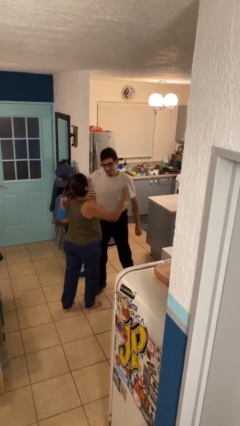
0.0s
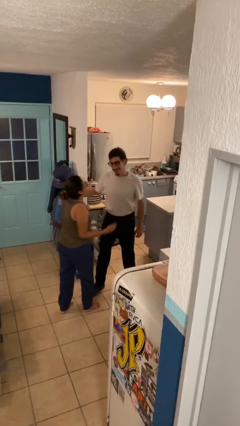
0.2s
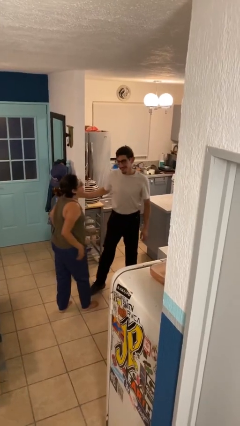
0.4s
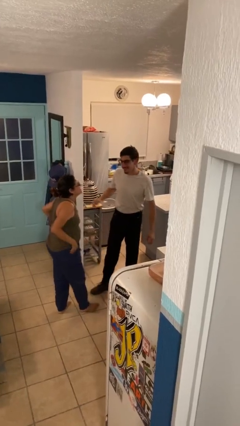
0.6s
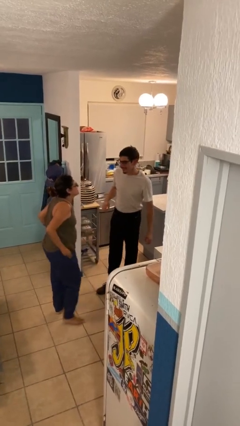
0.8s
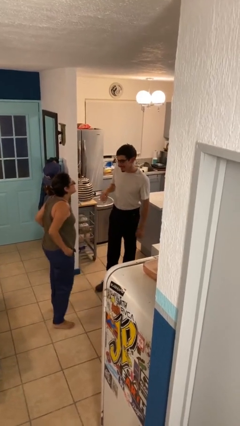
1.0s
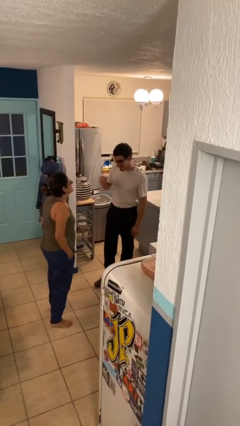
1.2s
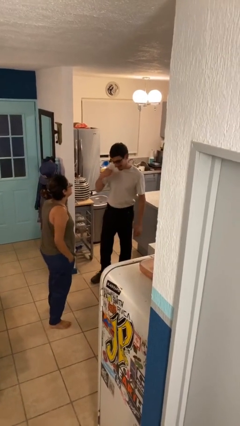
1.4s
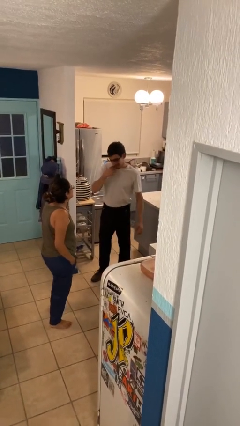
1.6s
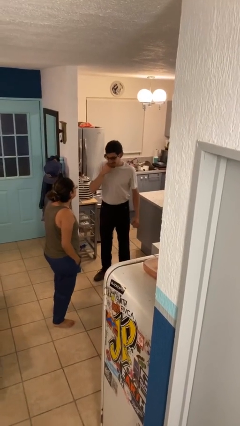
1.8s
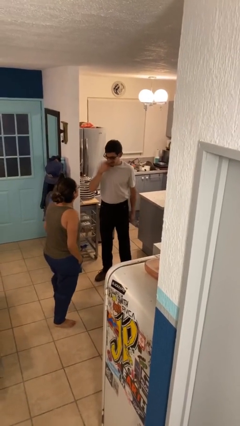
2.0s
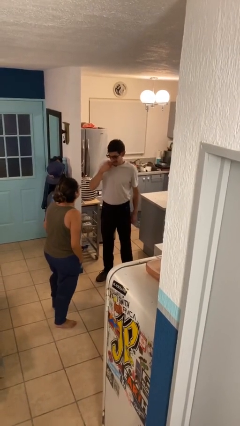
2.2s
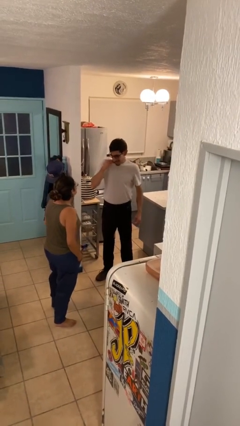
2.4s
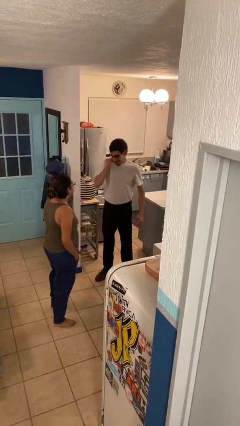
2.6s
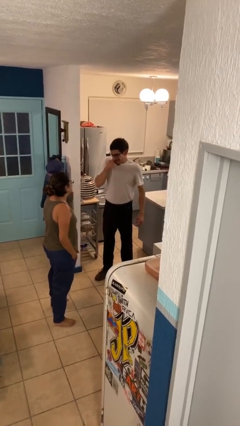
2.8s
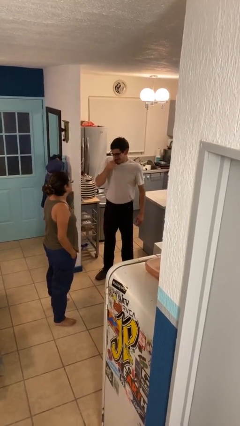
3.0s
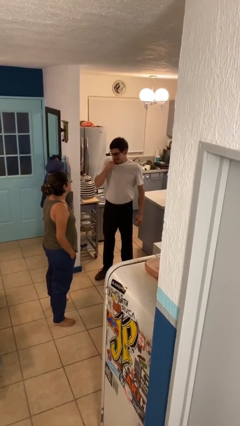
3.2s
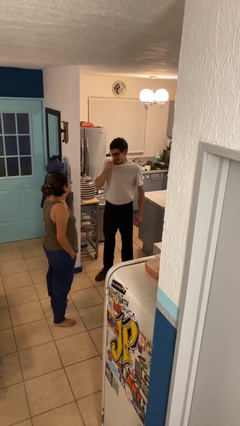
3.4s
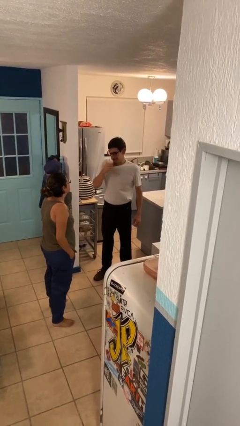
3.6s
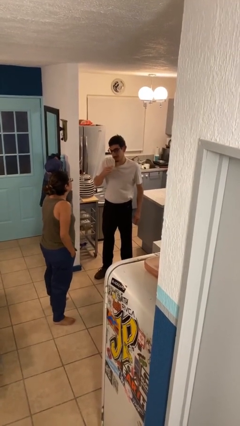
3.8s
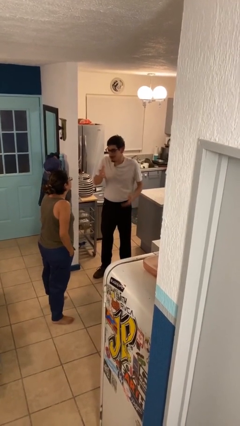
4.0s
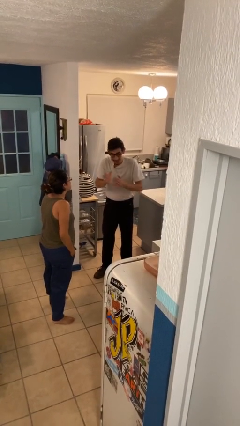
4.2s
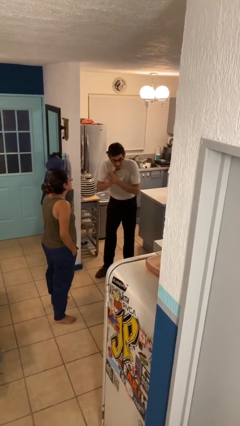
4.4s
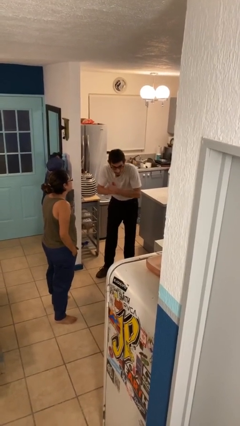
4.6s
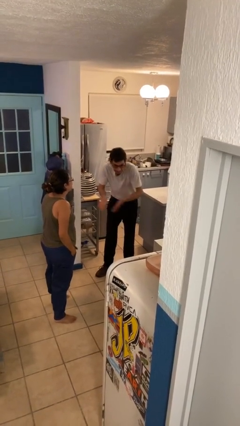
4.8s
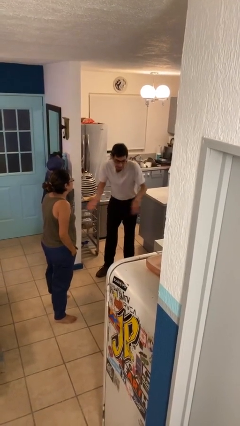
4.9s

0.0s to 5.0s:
person talks to person

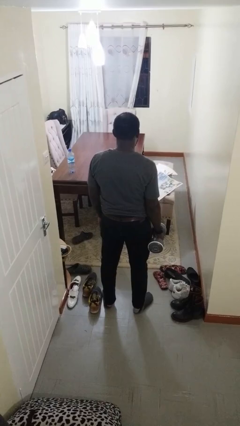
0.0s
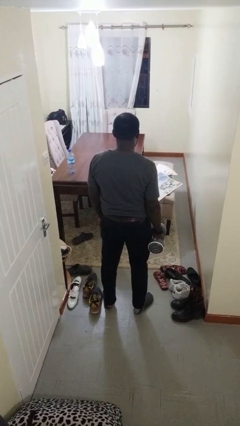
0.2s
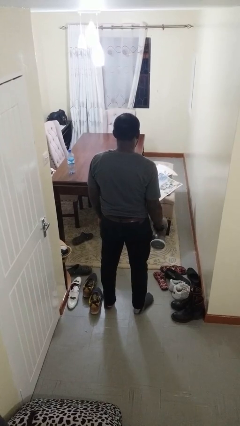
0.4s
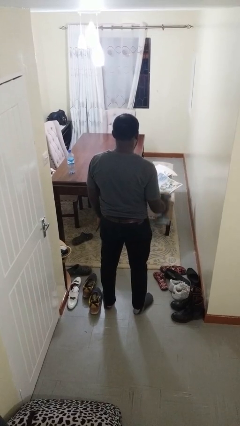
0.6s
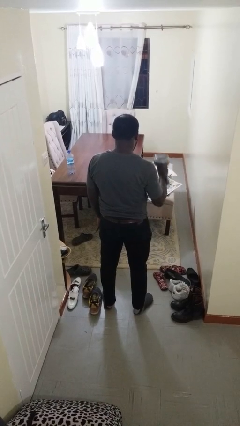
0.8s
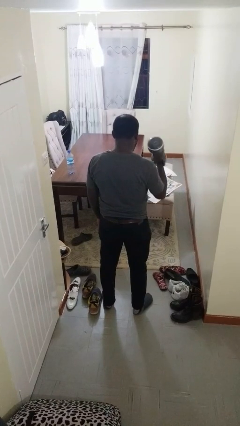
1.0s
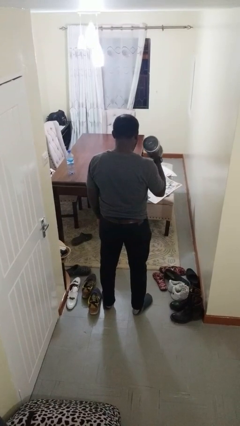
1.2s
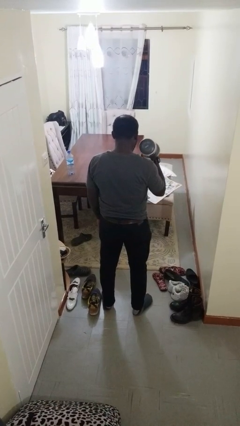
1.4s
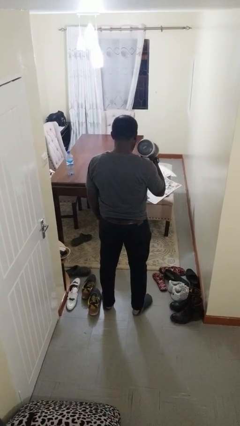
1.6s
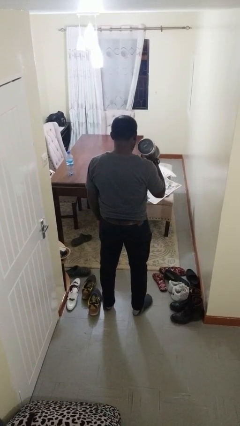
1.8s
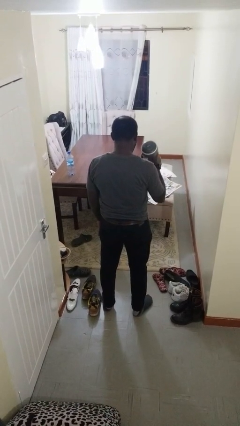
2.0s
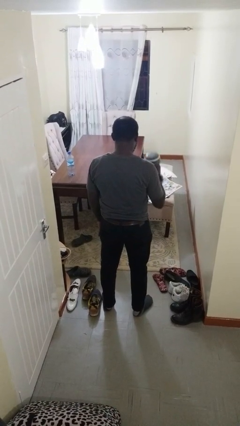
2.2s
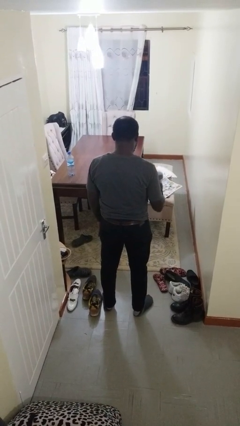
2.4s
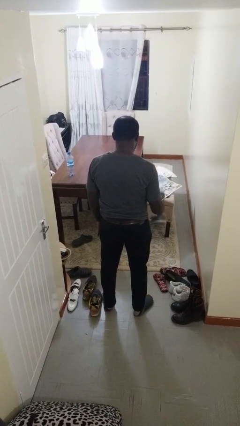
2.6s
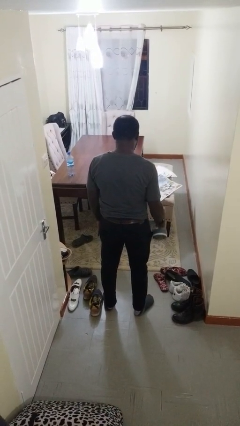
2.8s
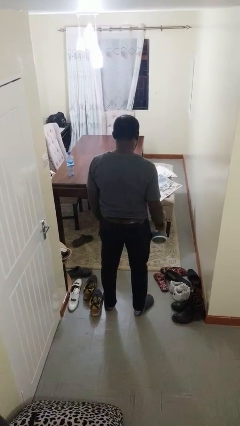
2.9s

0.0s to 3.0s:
person lifts dumbbells

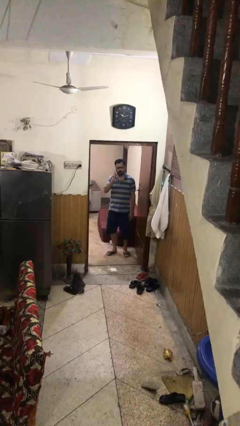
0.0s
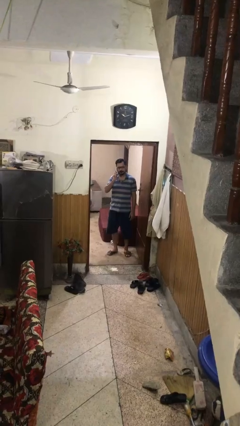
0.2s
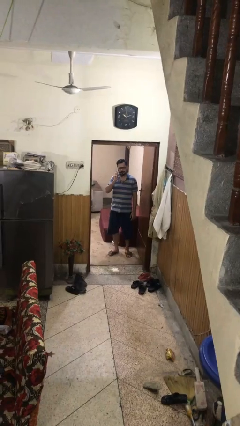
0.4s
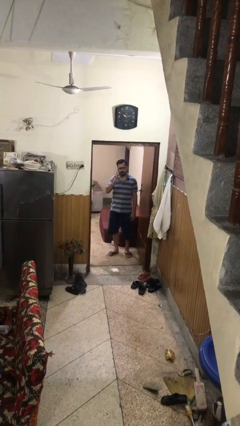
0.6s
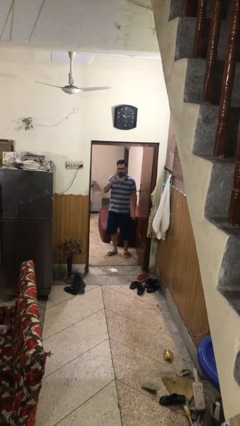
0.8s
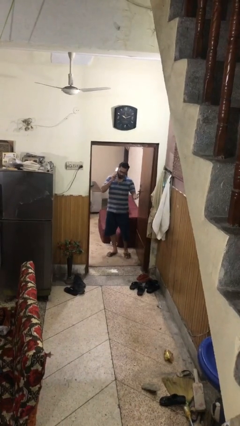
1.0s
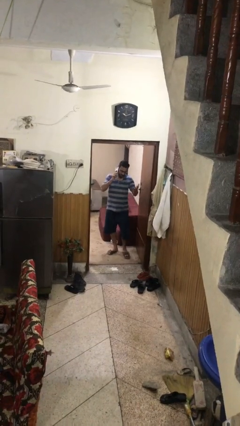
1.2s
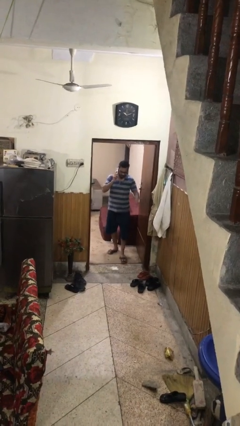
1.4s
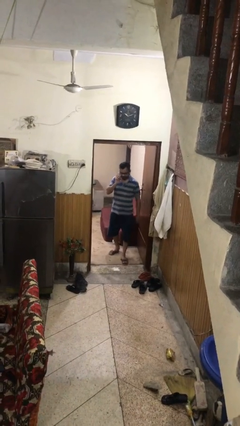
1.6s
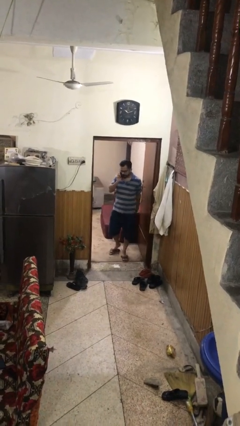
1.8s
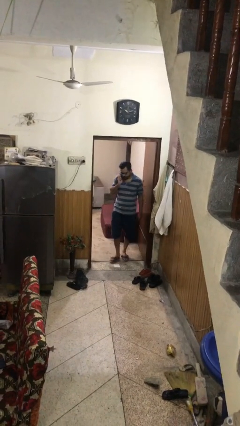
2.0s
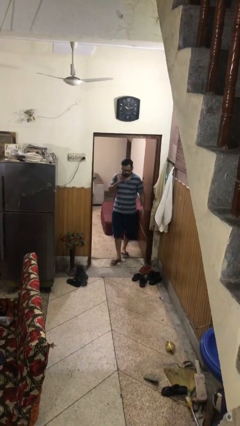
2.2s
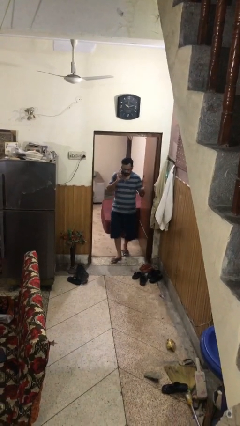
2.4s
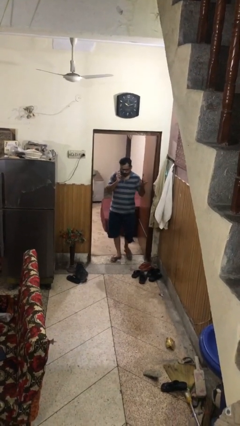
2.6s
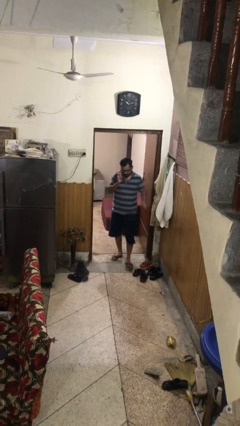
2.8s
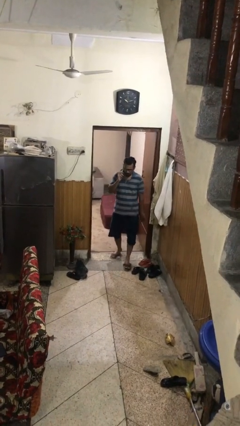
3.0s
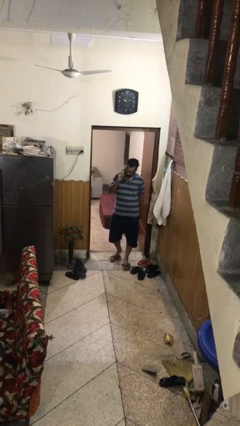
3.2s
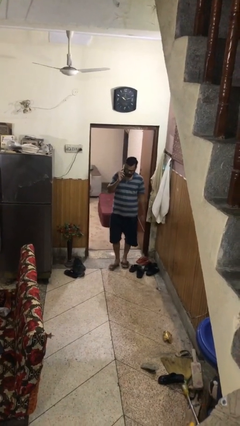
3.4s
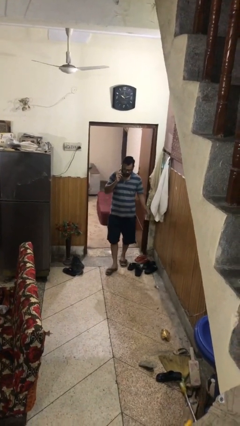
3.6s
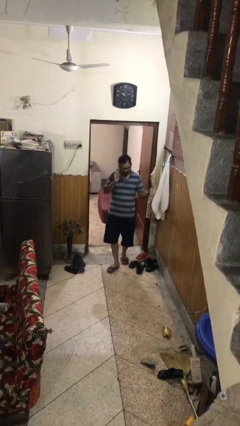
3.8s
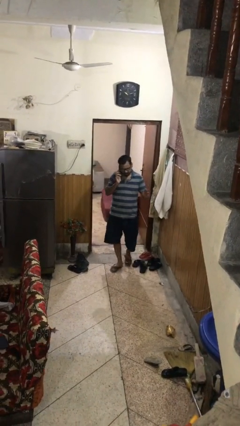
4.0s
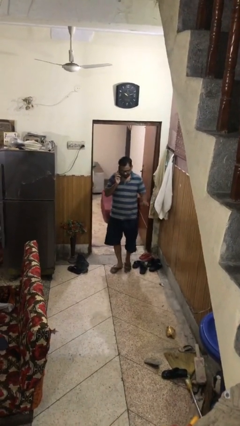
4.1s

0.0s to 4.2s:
person enters scene through structure

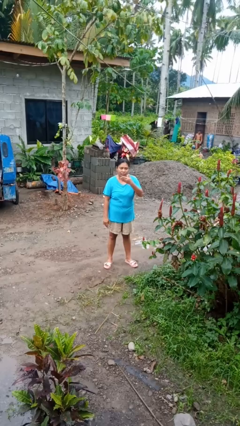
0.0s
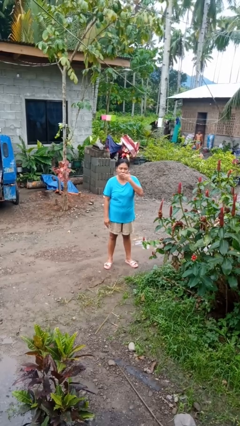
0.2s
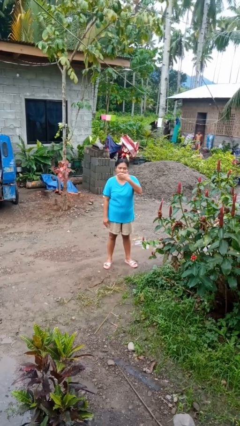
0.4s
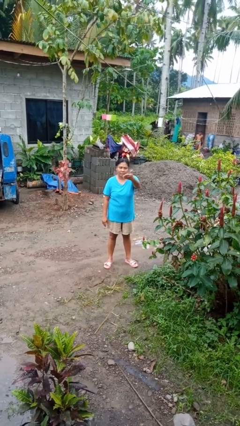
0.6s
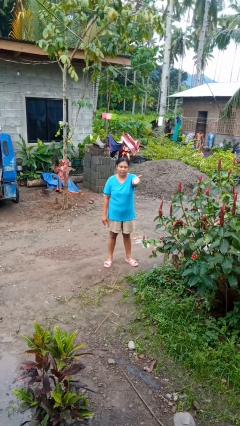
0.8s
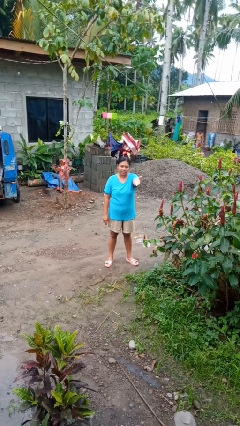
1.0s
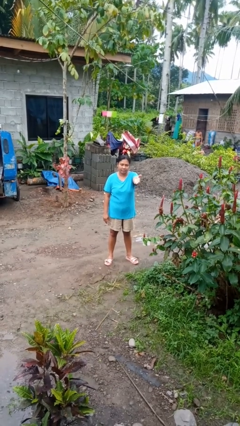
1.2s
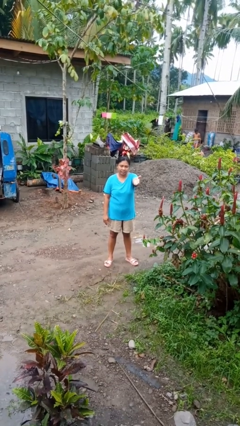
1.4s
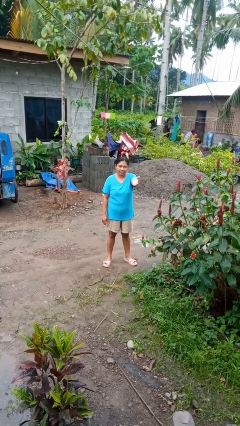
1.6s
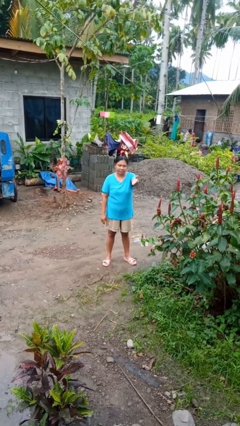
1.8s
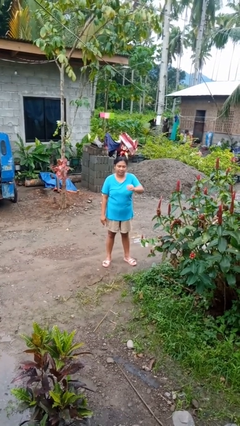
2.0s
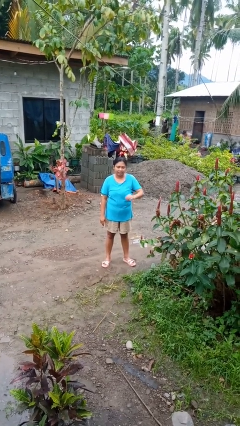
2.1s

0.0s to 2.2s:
person gestures blow kiss

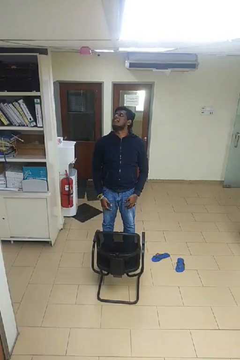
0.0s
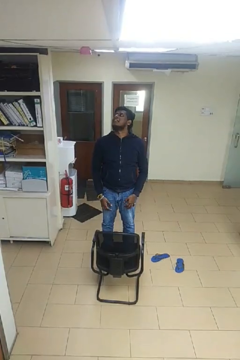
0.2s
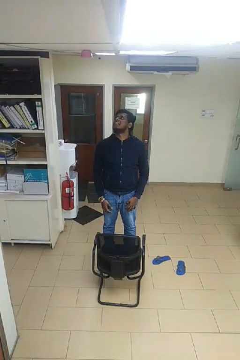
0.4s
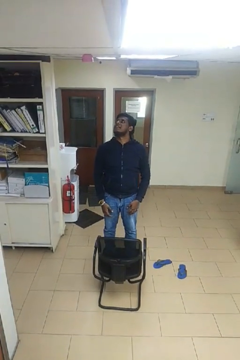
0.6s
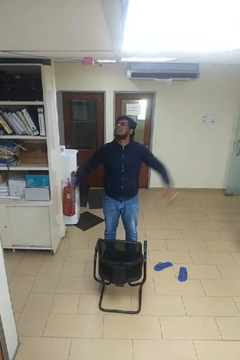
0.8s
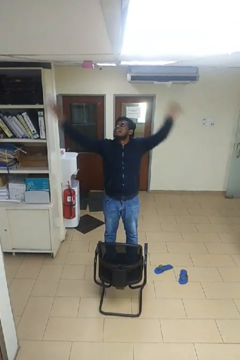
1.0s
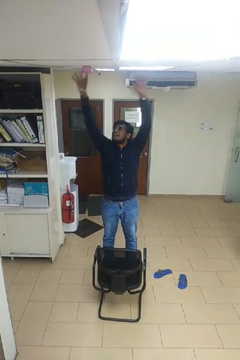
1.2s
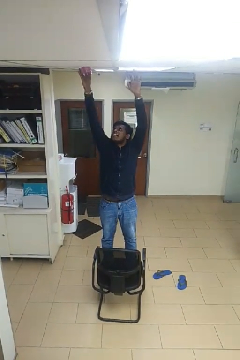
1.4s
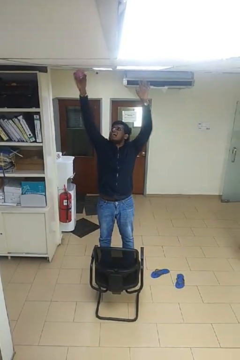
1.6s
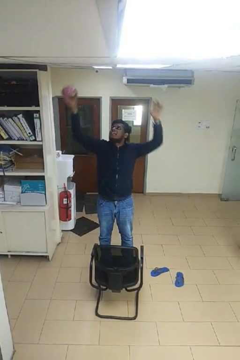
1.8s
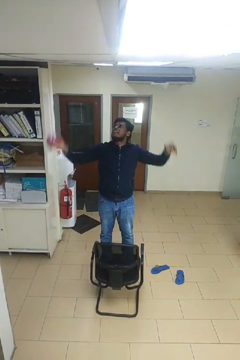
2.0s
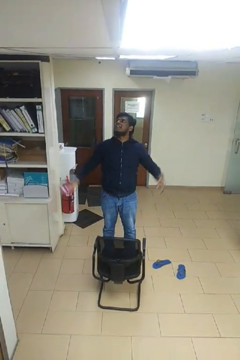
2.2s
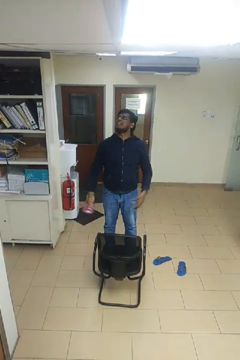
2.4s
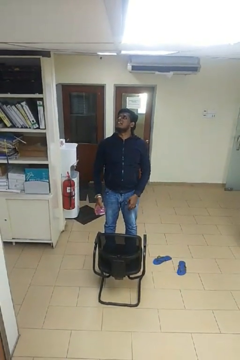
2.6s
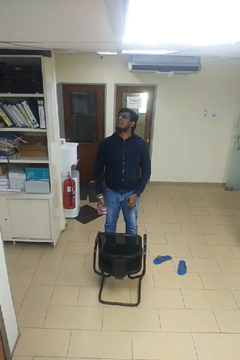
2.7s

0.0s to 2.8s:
person takes down smoke detector

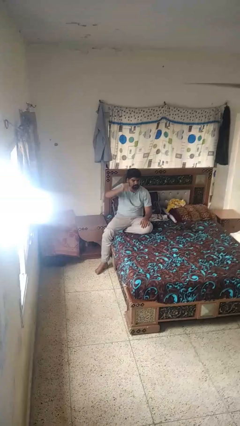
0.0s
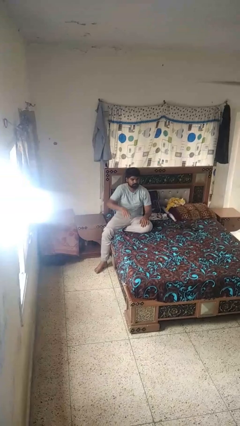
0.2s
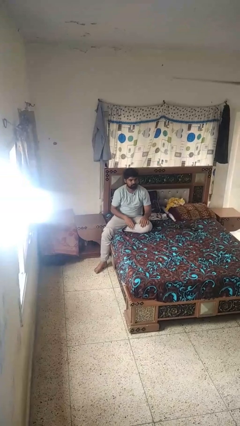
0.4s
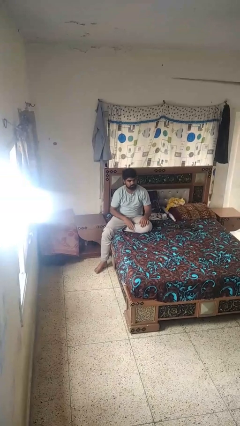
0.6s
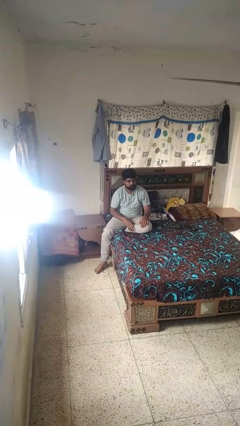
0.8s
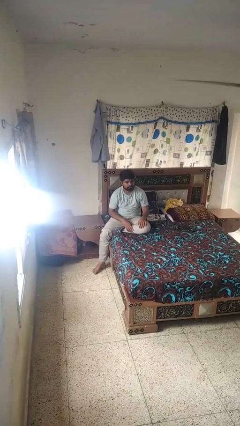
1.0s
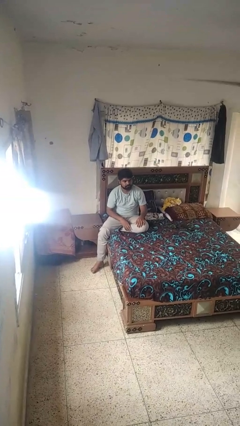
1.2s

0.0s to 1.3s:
person gestures lower hand
